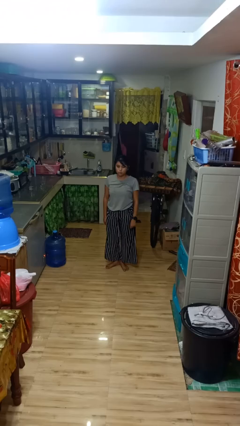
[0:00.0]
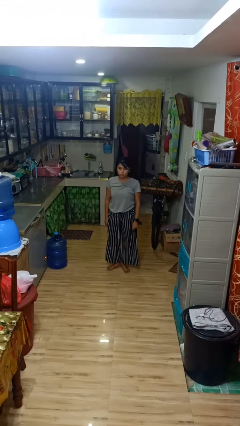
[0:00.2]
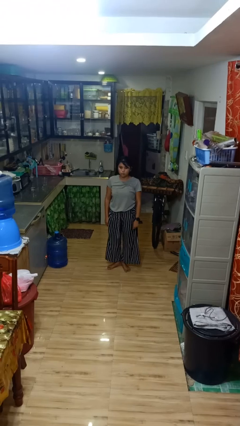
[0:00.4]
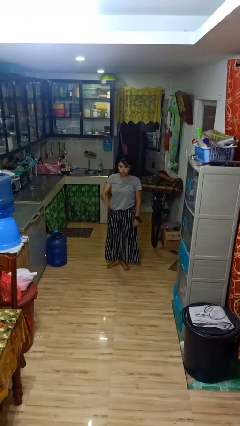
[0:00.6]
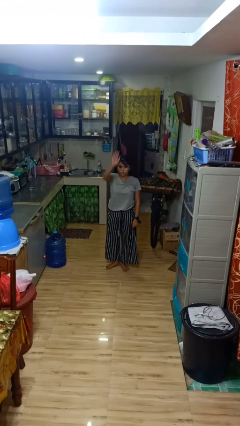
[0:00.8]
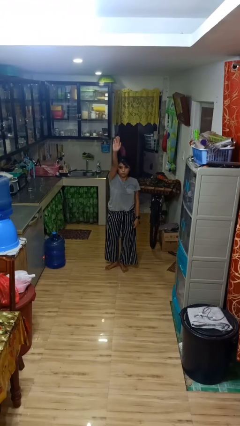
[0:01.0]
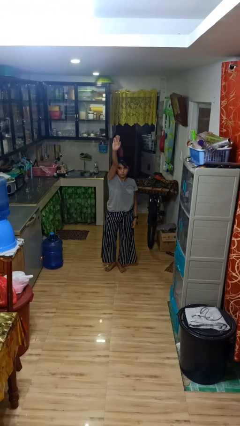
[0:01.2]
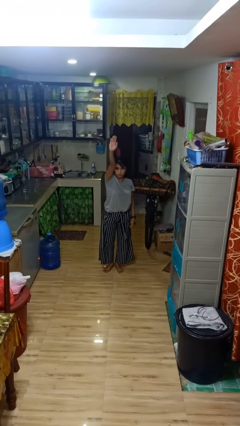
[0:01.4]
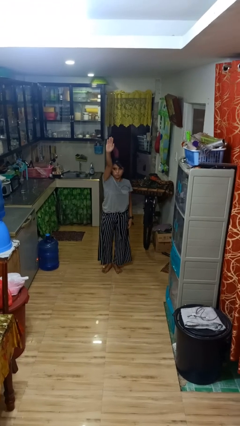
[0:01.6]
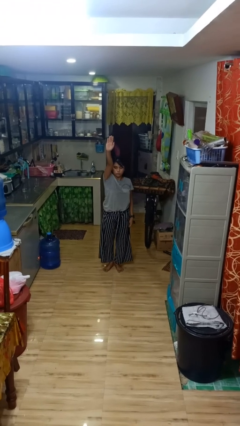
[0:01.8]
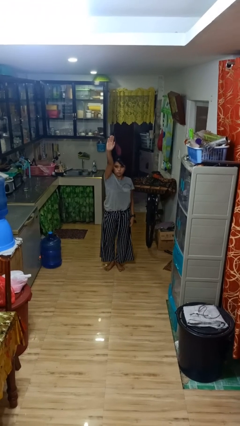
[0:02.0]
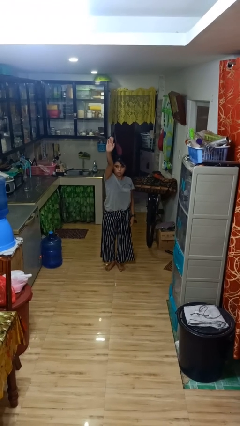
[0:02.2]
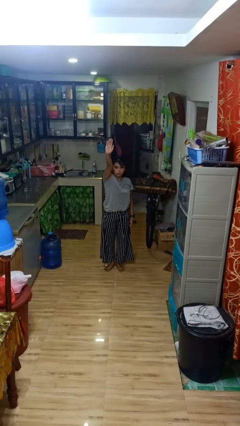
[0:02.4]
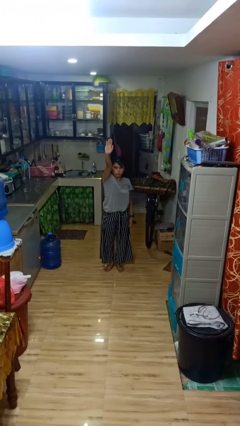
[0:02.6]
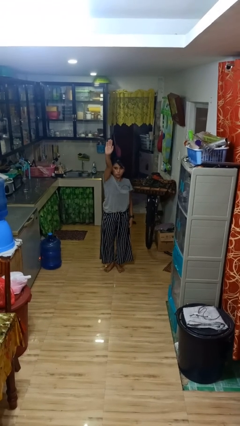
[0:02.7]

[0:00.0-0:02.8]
person gestures stop

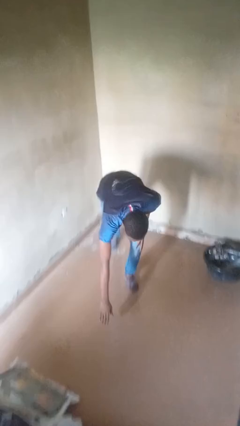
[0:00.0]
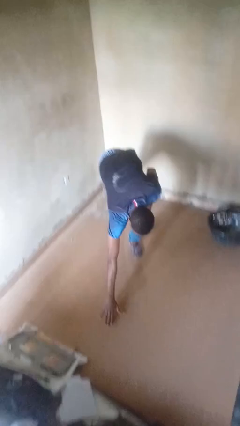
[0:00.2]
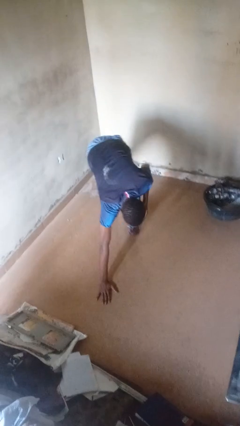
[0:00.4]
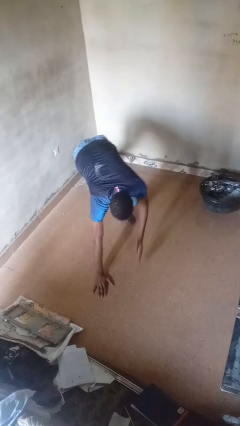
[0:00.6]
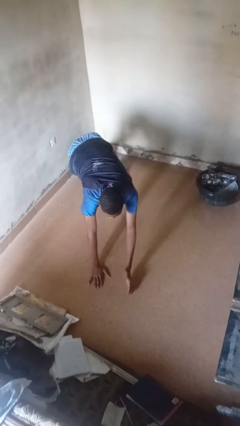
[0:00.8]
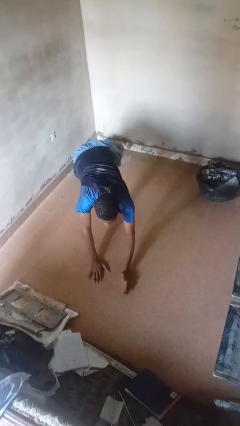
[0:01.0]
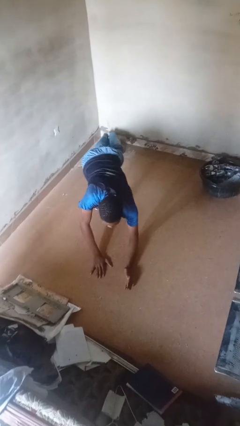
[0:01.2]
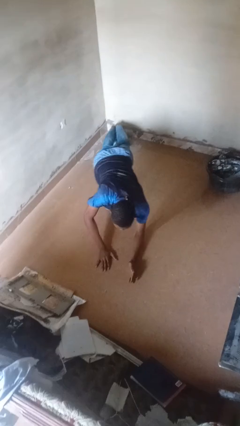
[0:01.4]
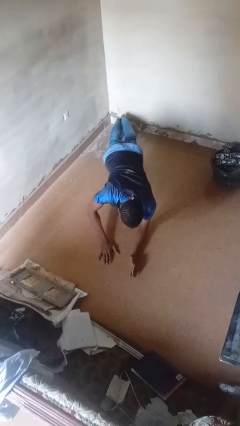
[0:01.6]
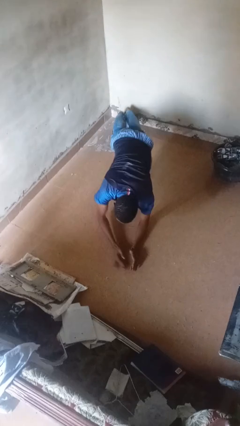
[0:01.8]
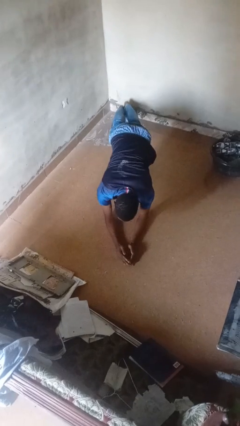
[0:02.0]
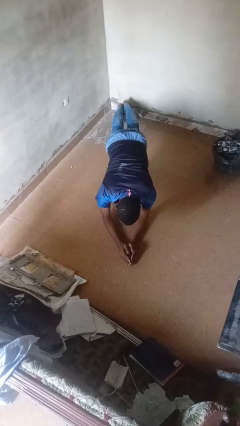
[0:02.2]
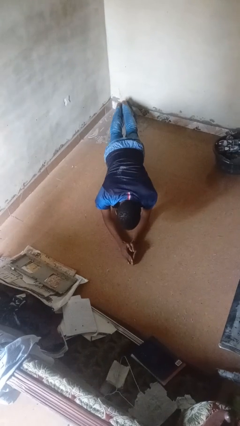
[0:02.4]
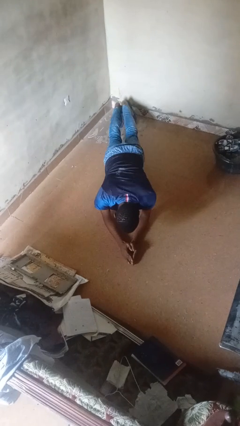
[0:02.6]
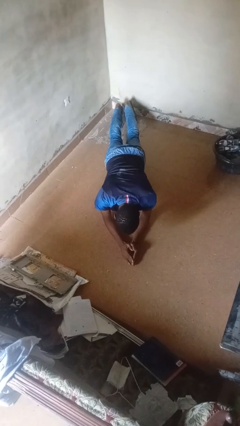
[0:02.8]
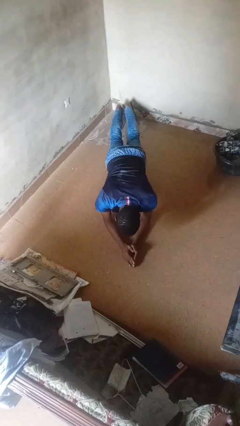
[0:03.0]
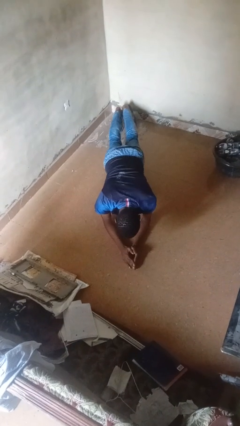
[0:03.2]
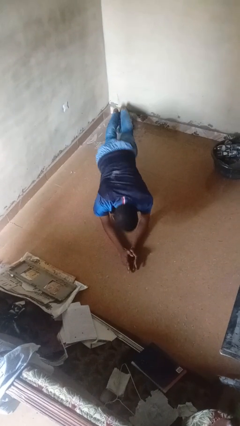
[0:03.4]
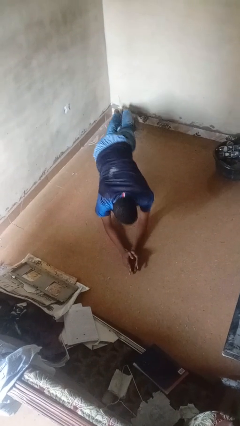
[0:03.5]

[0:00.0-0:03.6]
person exercises with plank

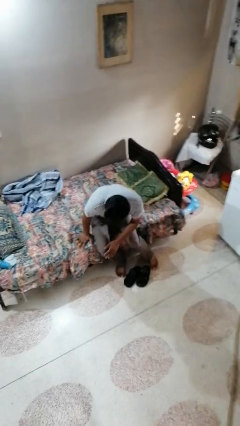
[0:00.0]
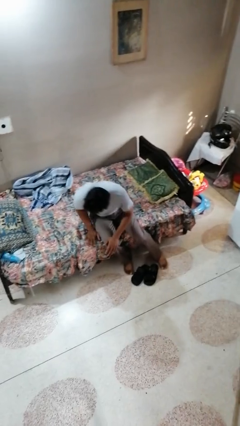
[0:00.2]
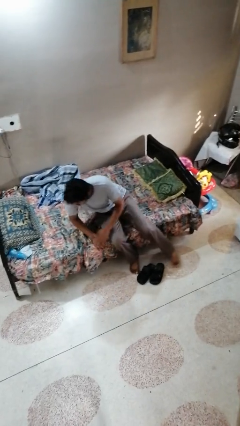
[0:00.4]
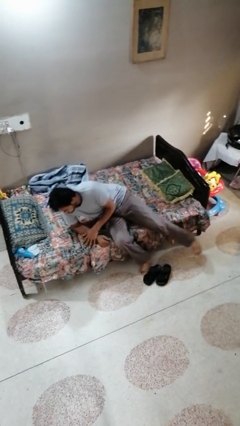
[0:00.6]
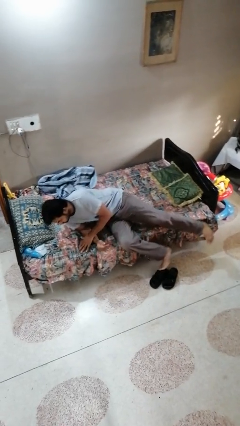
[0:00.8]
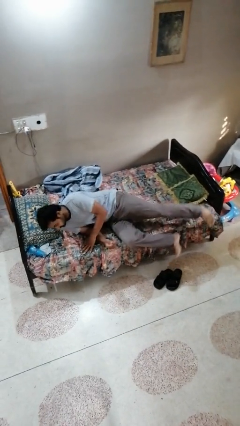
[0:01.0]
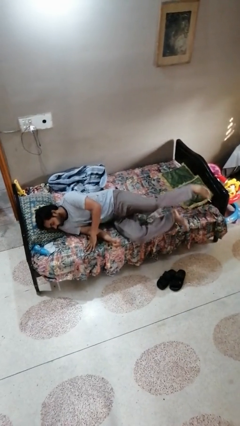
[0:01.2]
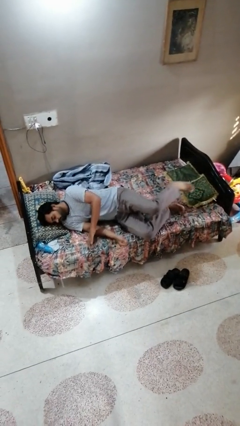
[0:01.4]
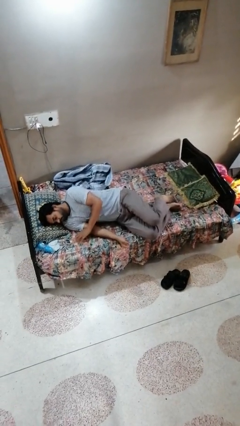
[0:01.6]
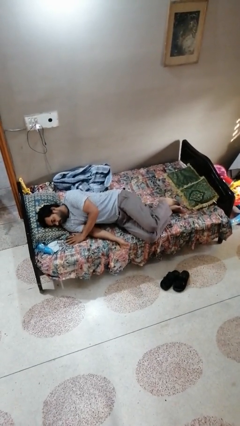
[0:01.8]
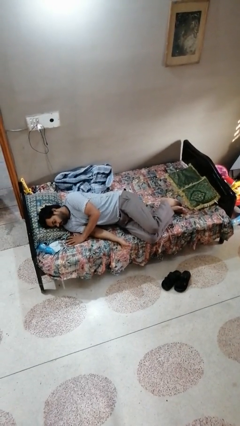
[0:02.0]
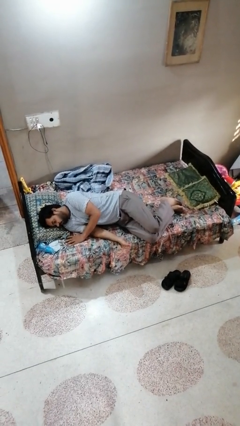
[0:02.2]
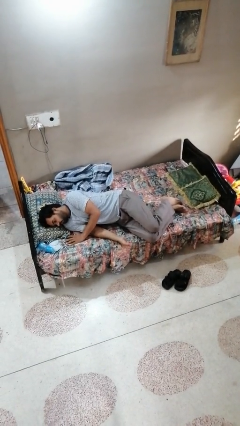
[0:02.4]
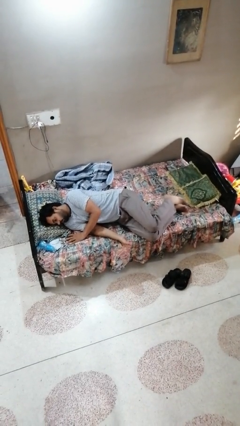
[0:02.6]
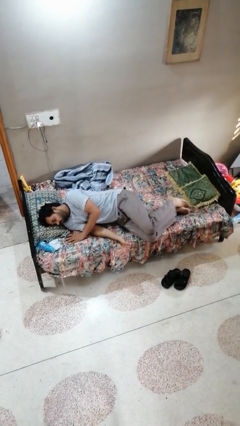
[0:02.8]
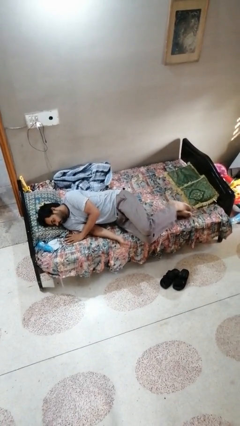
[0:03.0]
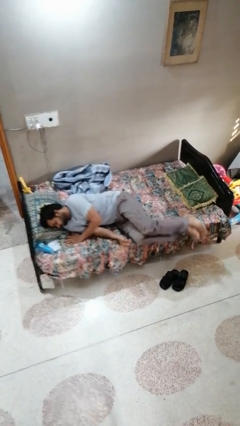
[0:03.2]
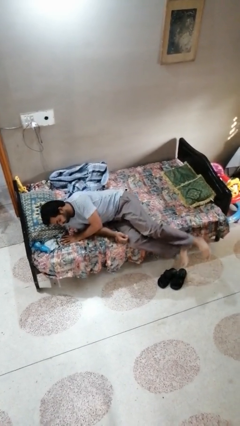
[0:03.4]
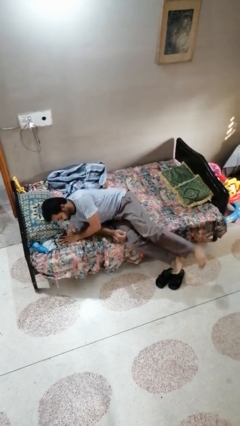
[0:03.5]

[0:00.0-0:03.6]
person lies down on bed

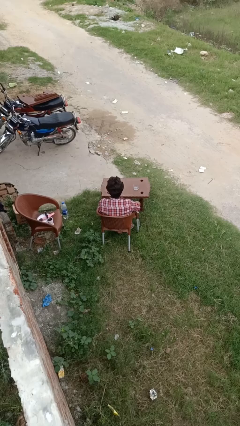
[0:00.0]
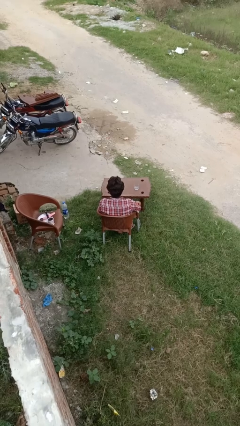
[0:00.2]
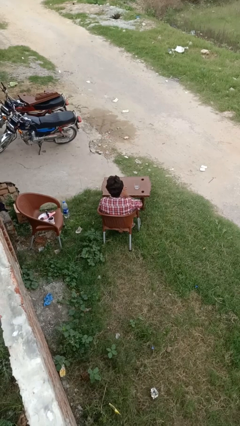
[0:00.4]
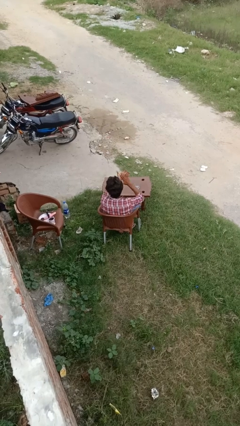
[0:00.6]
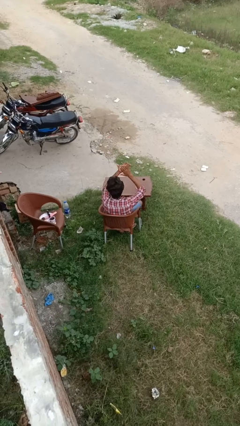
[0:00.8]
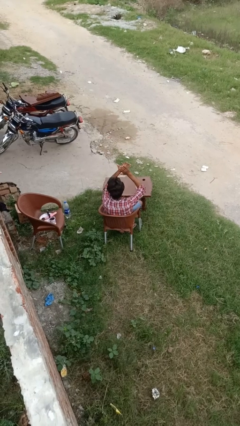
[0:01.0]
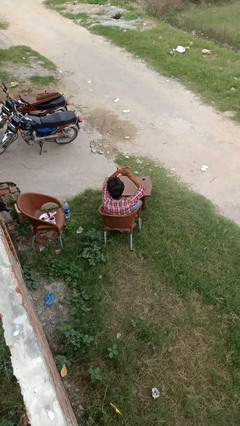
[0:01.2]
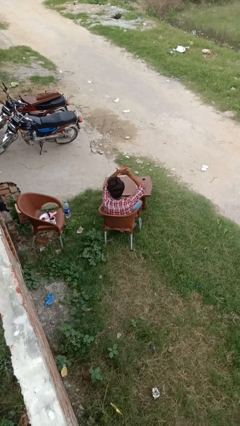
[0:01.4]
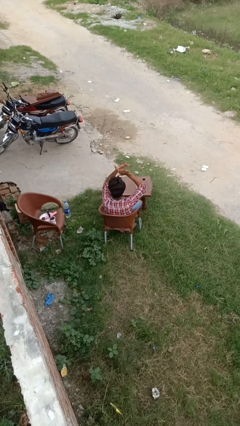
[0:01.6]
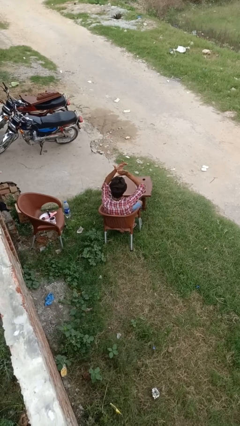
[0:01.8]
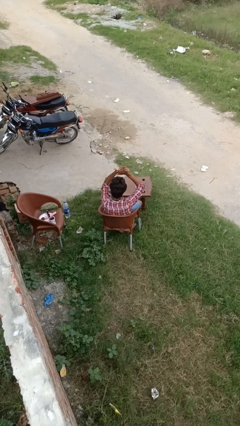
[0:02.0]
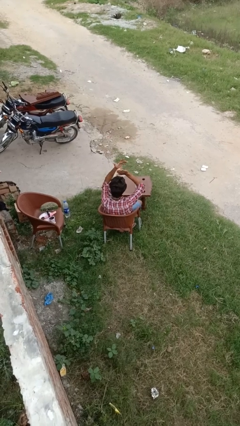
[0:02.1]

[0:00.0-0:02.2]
person claps hands

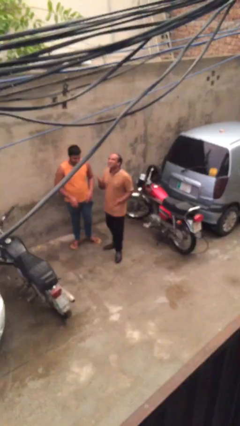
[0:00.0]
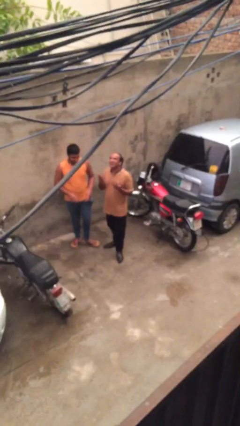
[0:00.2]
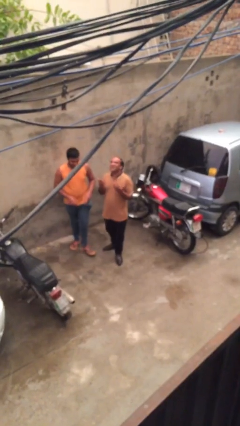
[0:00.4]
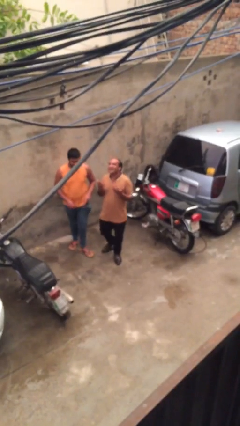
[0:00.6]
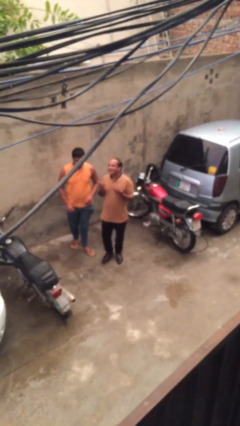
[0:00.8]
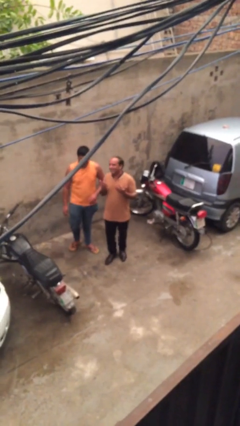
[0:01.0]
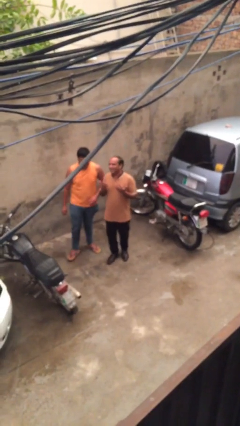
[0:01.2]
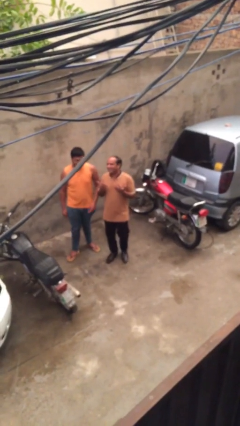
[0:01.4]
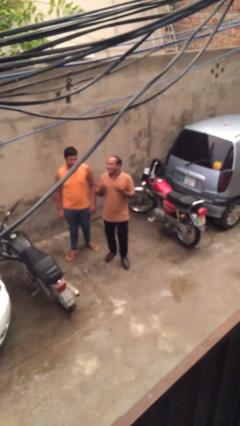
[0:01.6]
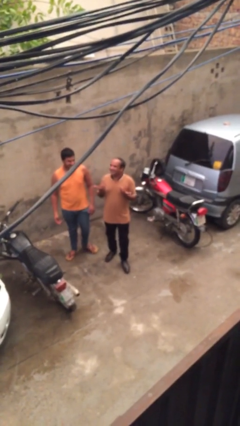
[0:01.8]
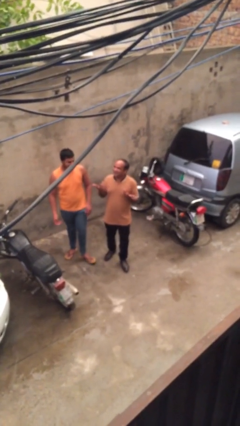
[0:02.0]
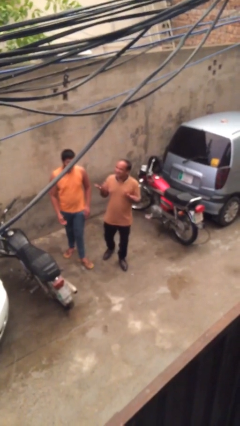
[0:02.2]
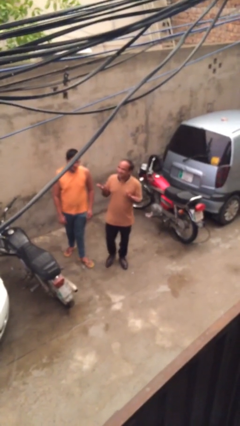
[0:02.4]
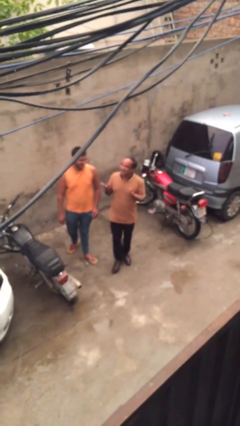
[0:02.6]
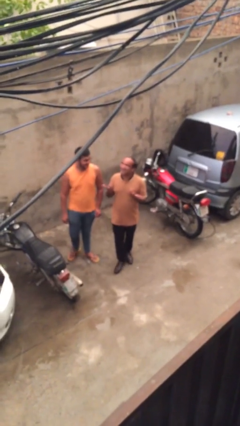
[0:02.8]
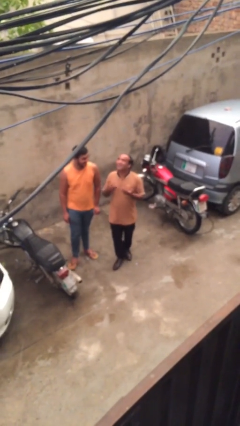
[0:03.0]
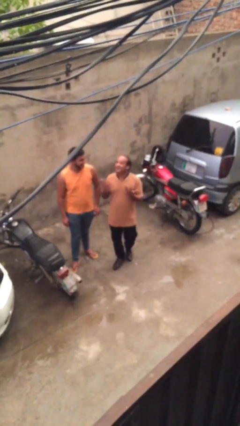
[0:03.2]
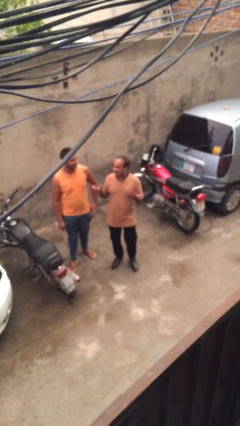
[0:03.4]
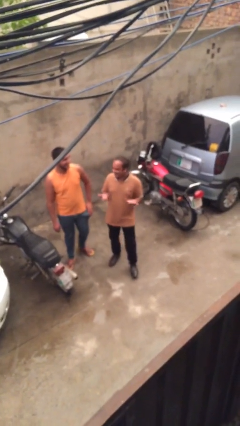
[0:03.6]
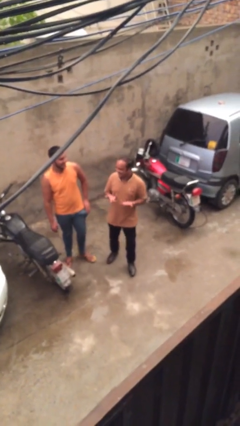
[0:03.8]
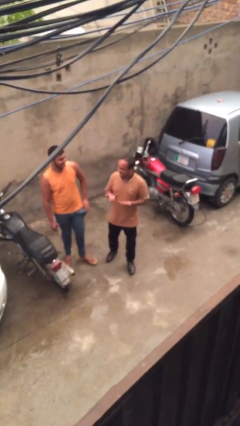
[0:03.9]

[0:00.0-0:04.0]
person talks to person

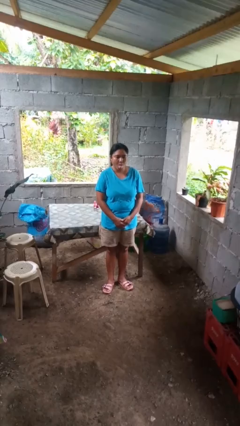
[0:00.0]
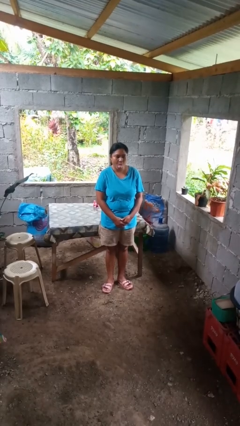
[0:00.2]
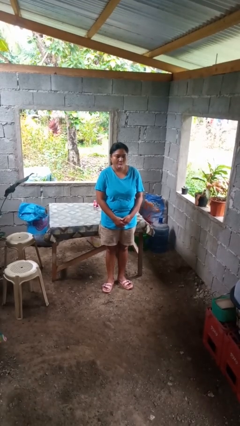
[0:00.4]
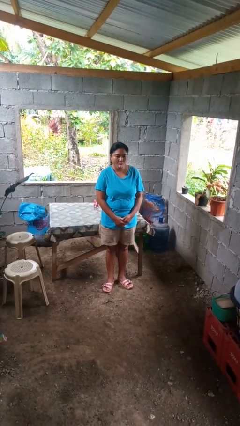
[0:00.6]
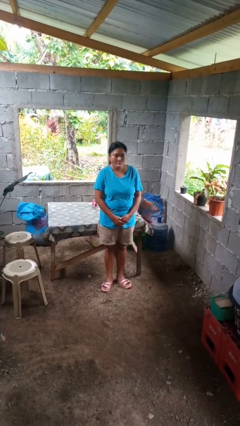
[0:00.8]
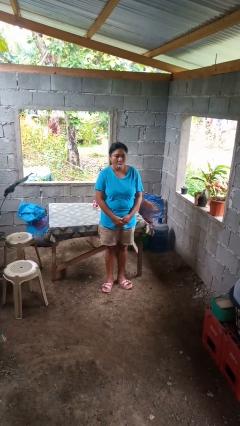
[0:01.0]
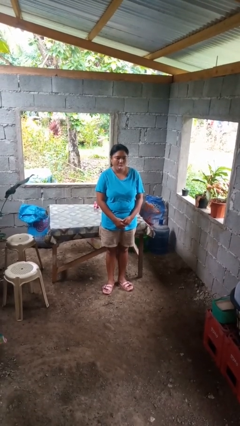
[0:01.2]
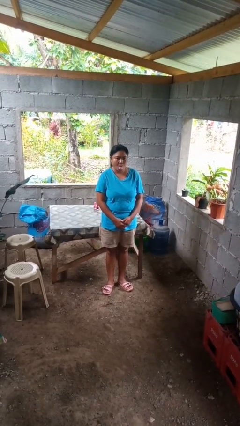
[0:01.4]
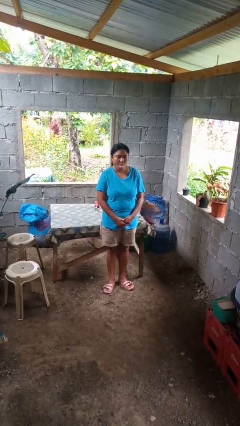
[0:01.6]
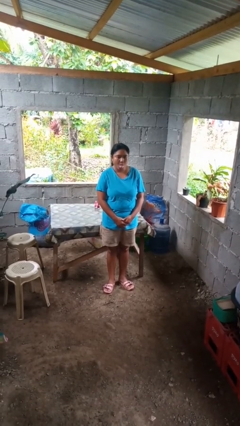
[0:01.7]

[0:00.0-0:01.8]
person sticks out tongue
